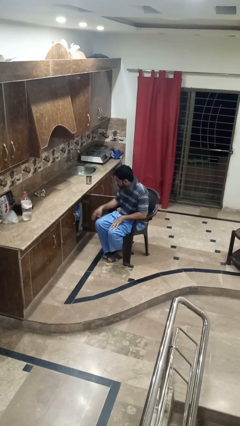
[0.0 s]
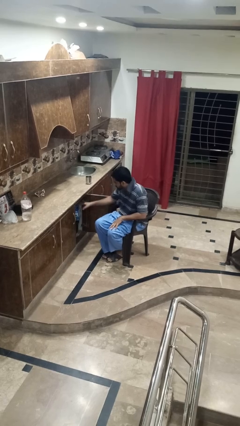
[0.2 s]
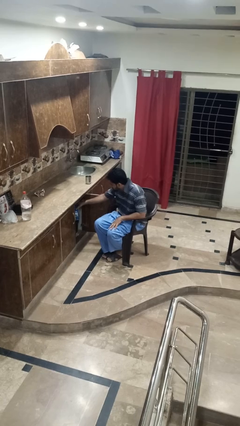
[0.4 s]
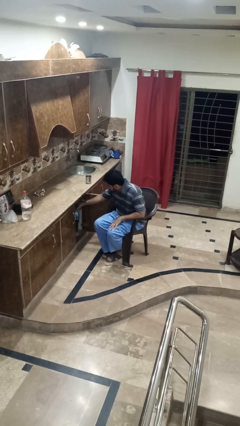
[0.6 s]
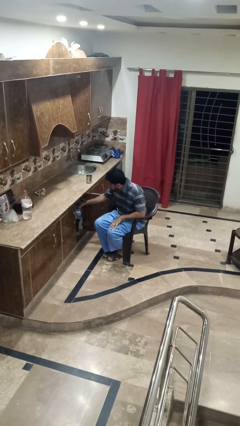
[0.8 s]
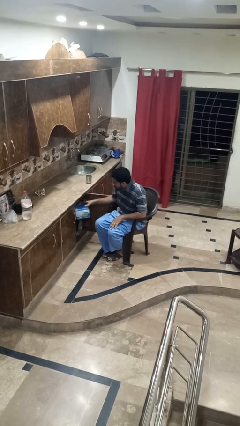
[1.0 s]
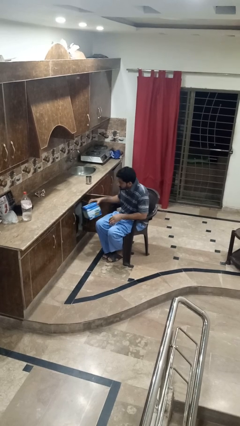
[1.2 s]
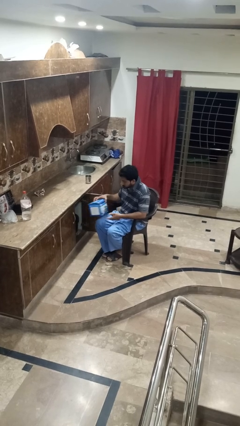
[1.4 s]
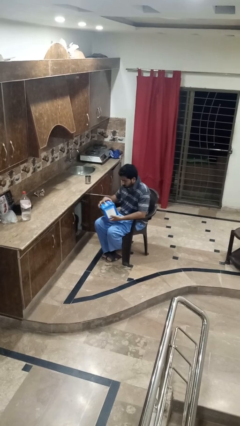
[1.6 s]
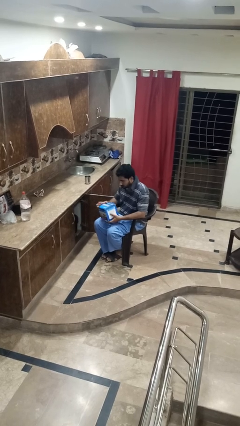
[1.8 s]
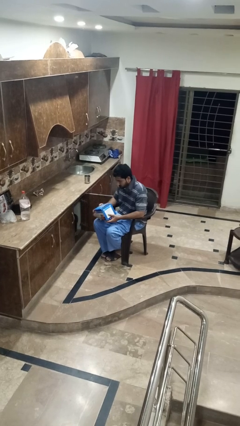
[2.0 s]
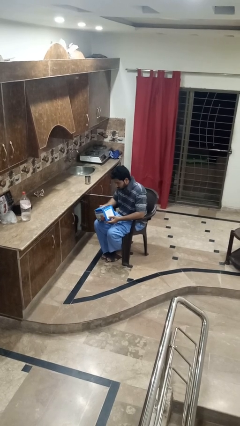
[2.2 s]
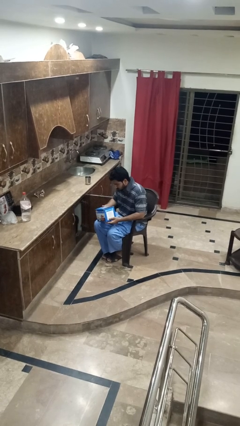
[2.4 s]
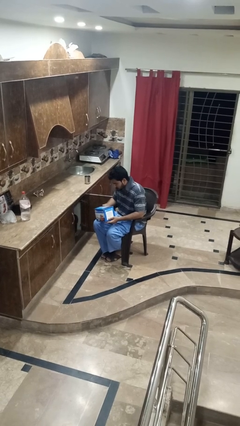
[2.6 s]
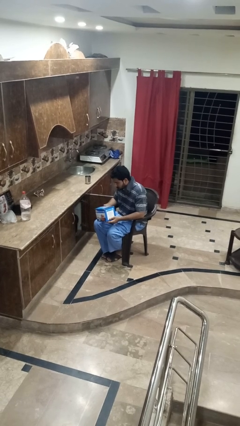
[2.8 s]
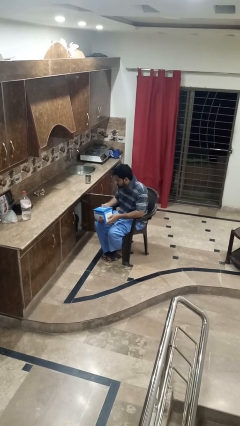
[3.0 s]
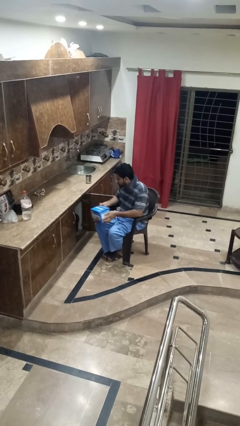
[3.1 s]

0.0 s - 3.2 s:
person picks up object from cabinet

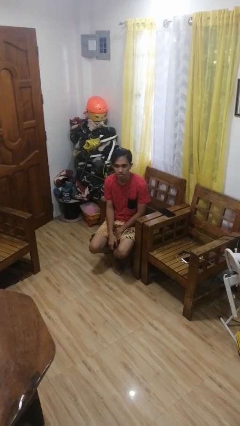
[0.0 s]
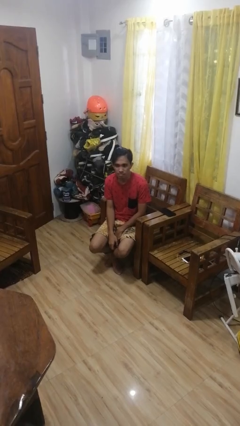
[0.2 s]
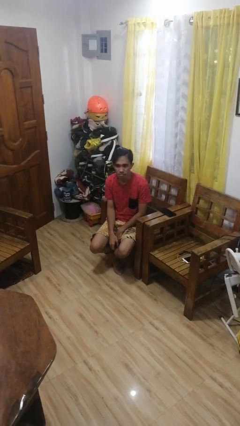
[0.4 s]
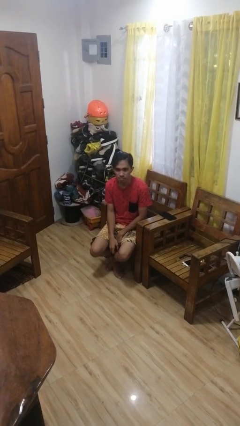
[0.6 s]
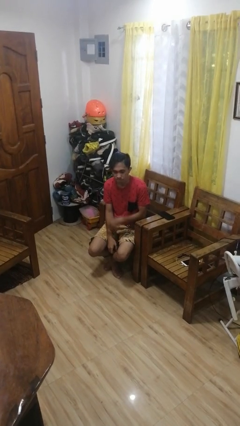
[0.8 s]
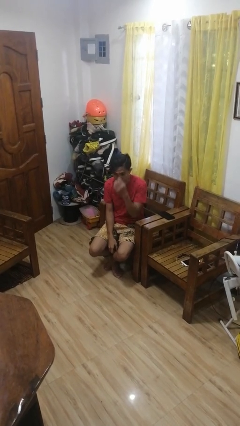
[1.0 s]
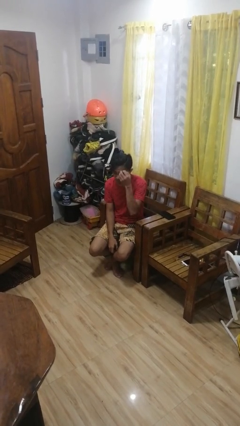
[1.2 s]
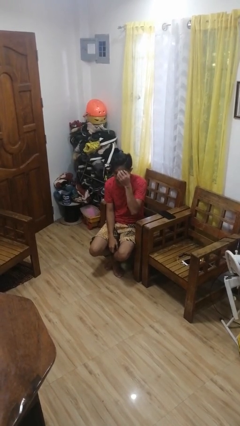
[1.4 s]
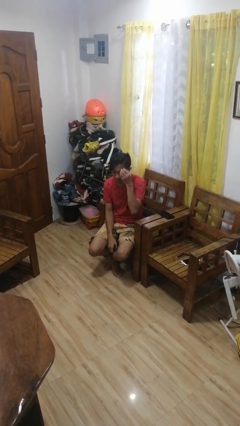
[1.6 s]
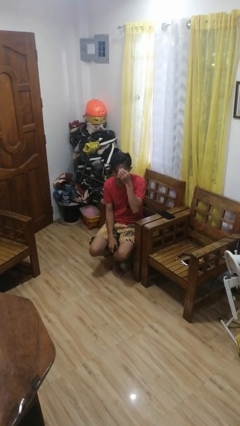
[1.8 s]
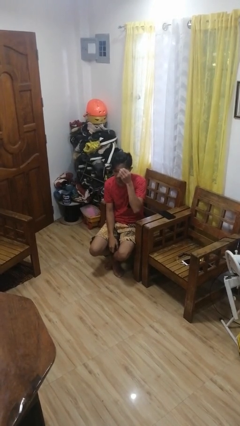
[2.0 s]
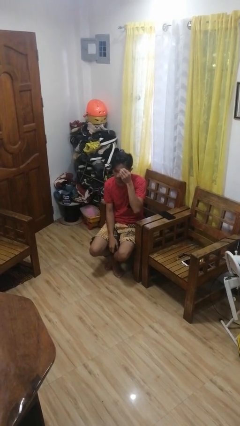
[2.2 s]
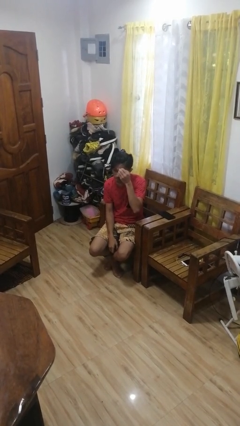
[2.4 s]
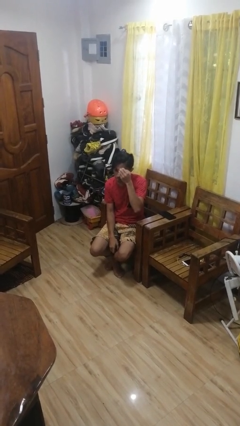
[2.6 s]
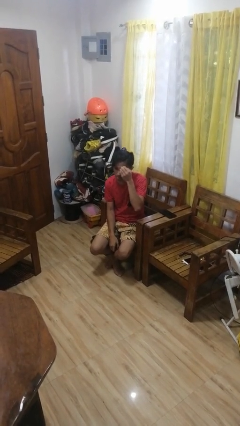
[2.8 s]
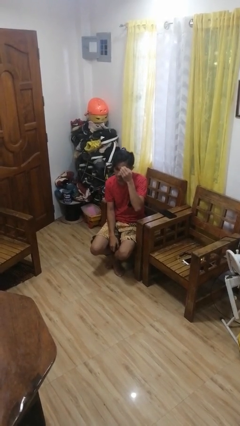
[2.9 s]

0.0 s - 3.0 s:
person scratches face

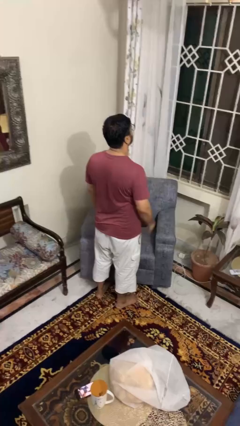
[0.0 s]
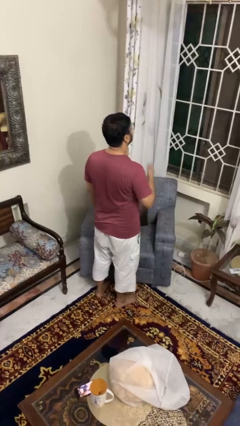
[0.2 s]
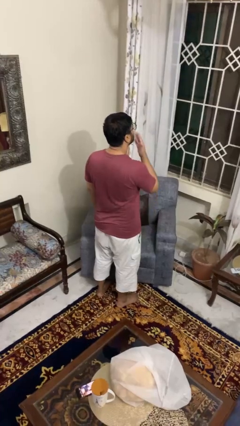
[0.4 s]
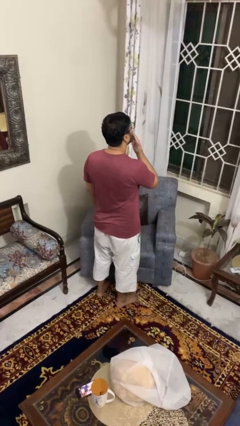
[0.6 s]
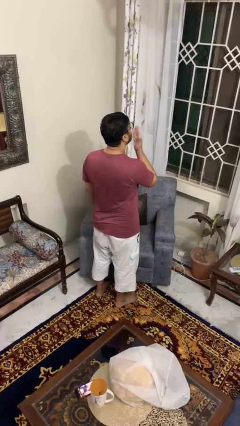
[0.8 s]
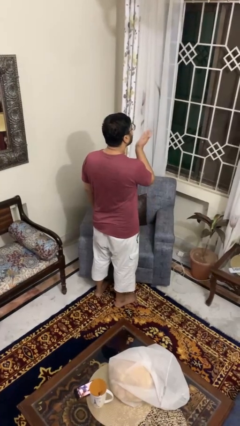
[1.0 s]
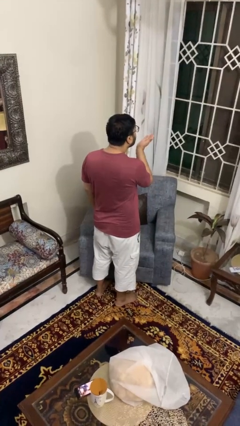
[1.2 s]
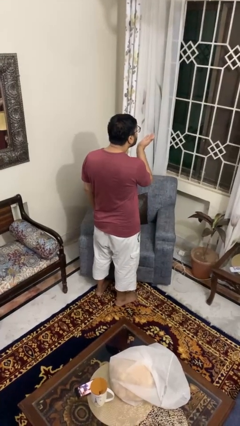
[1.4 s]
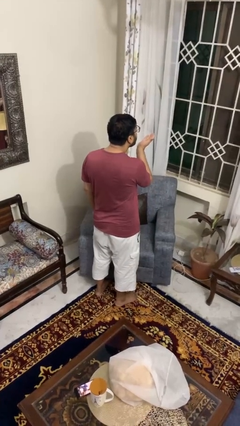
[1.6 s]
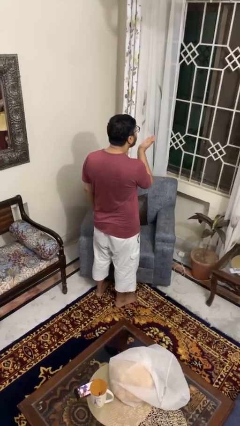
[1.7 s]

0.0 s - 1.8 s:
person gestures blow kiss

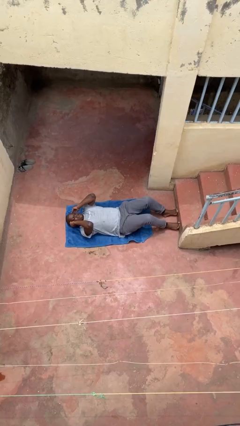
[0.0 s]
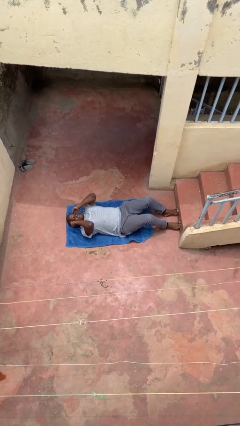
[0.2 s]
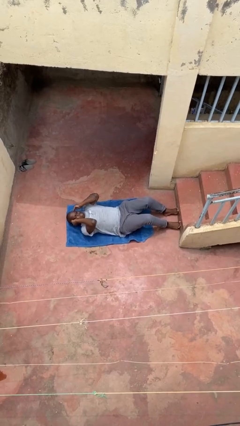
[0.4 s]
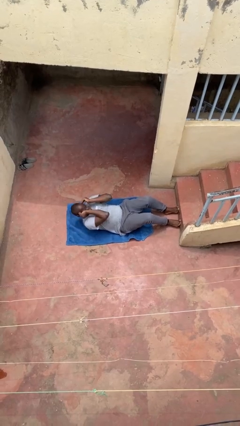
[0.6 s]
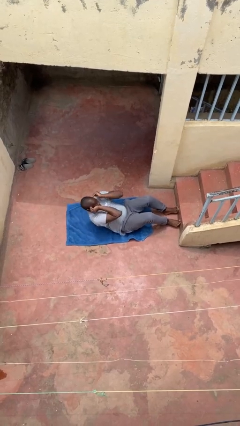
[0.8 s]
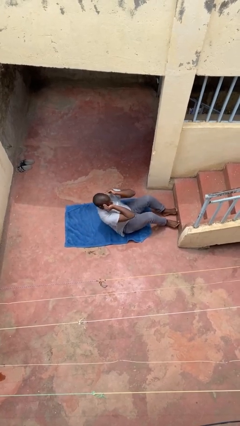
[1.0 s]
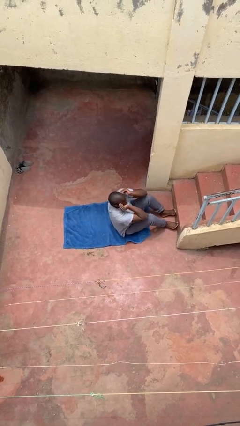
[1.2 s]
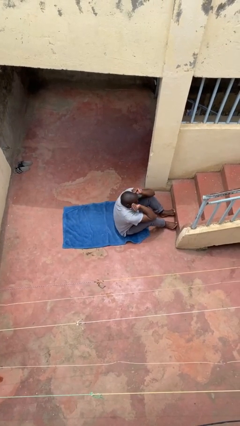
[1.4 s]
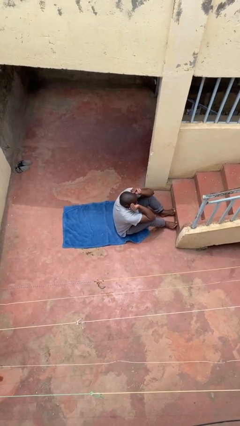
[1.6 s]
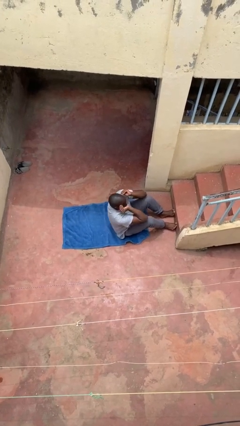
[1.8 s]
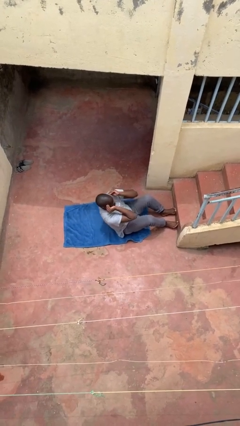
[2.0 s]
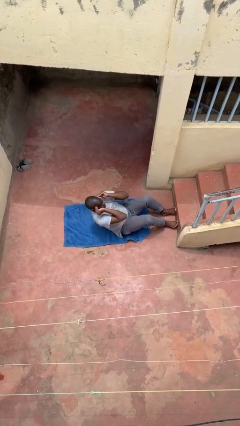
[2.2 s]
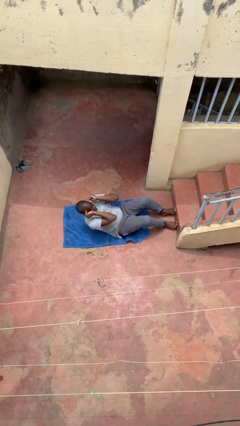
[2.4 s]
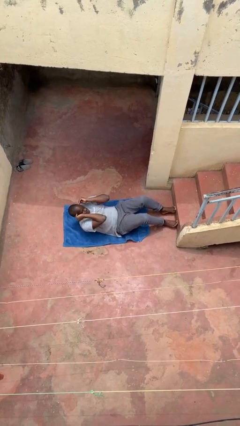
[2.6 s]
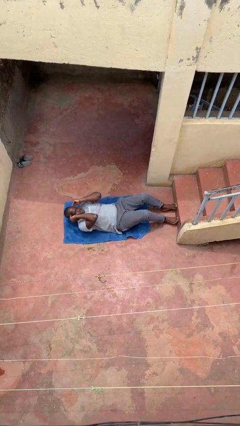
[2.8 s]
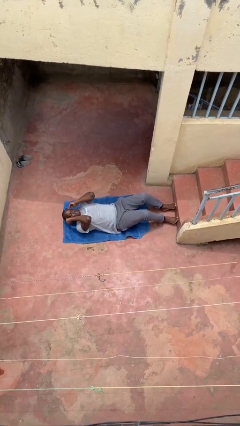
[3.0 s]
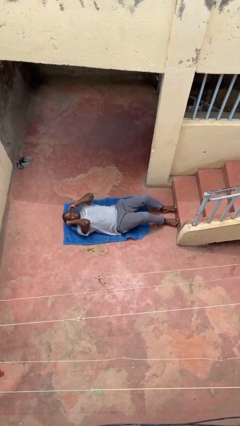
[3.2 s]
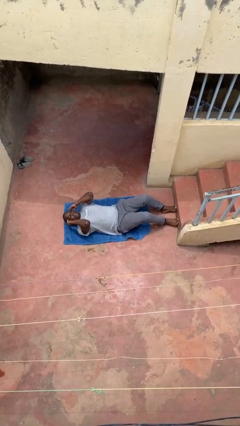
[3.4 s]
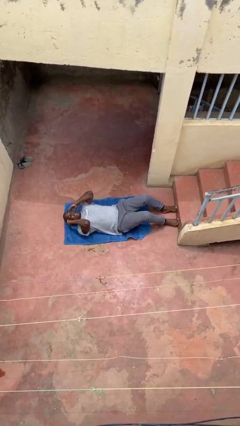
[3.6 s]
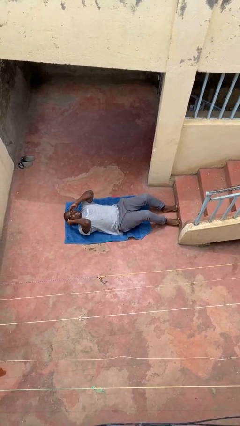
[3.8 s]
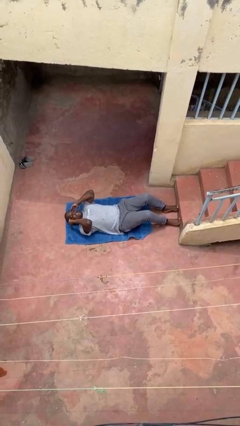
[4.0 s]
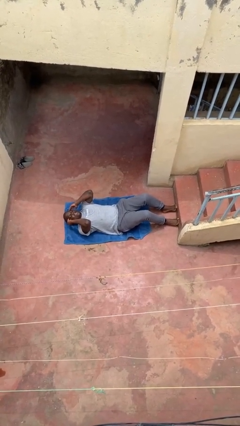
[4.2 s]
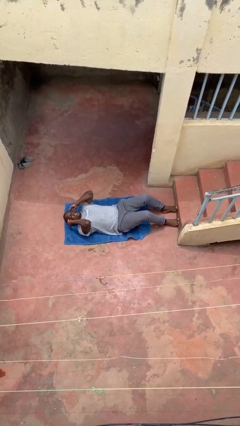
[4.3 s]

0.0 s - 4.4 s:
person exercises with situp

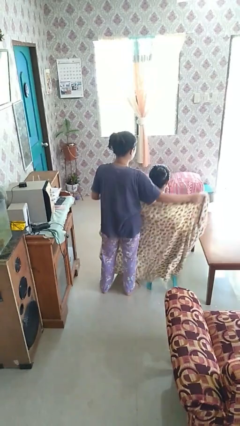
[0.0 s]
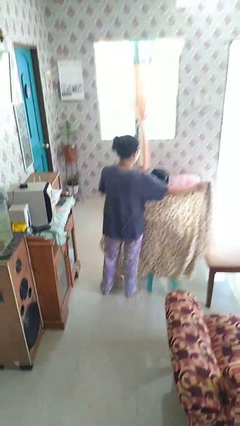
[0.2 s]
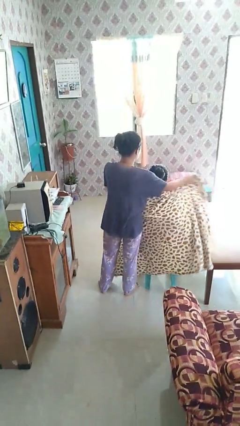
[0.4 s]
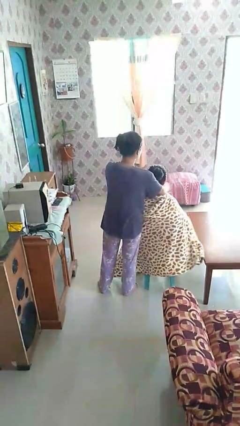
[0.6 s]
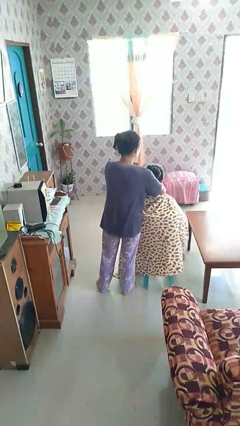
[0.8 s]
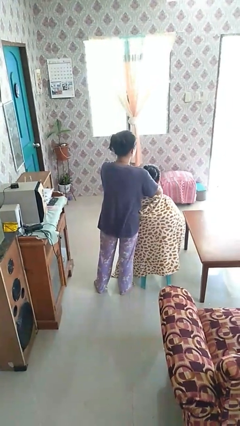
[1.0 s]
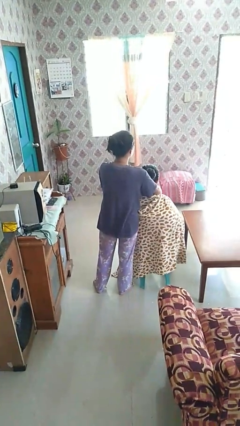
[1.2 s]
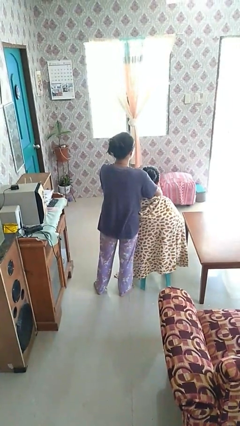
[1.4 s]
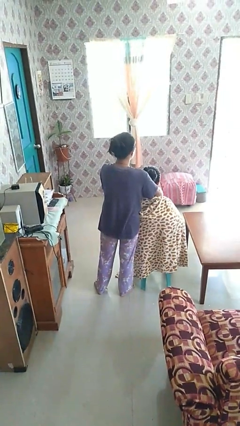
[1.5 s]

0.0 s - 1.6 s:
person covers friend with blanket

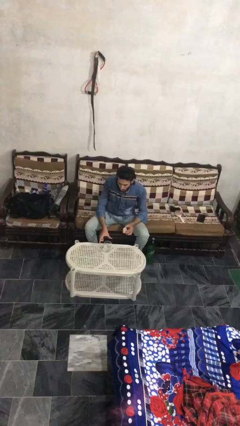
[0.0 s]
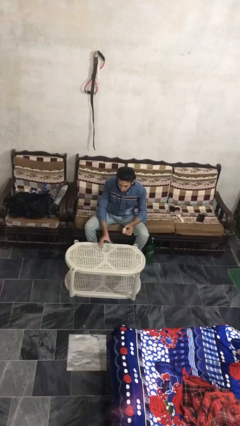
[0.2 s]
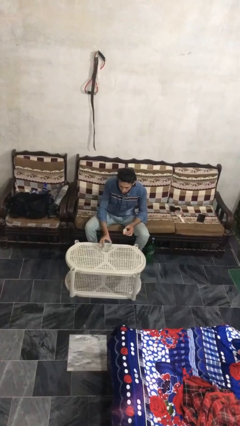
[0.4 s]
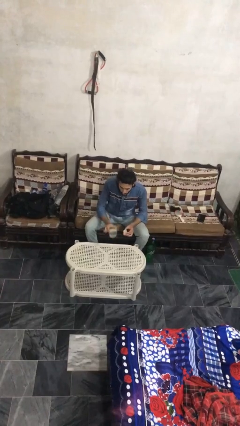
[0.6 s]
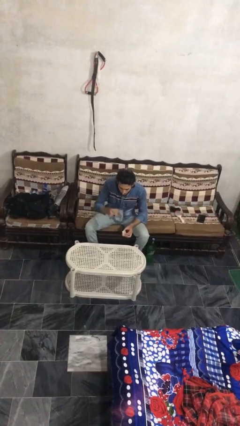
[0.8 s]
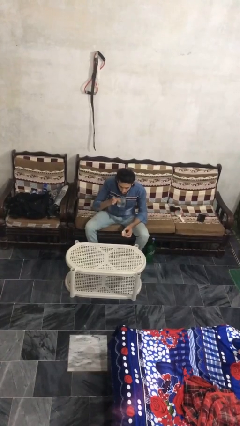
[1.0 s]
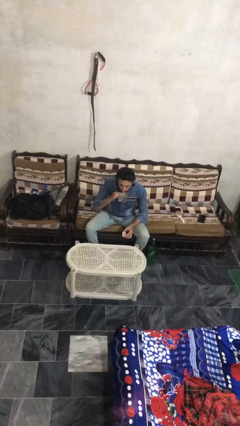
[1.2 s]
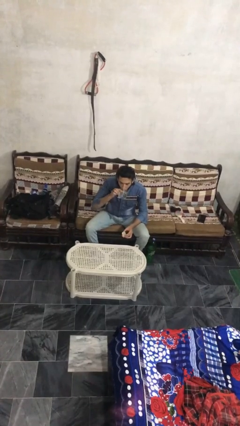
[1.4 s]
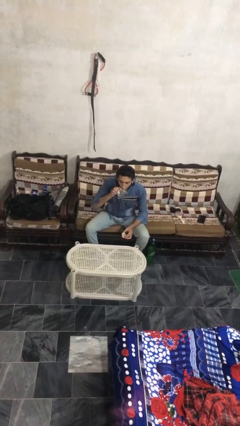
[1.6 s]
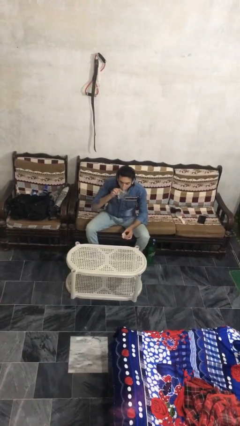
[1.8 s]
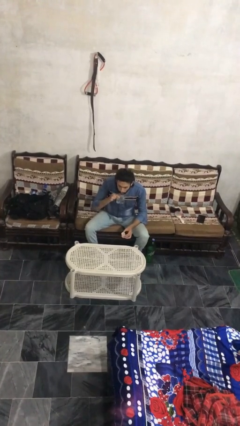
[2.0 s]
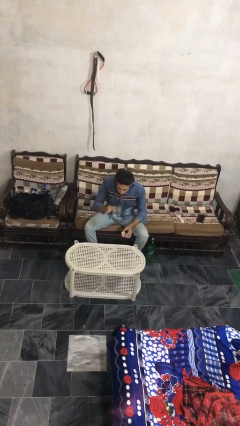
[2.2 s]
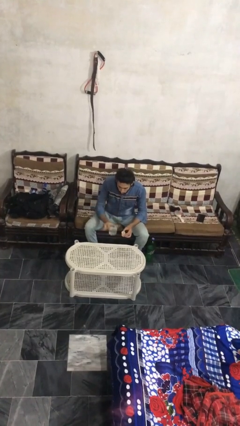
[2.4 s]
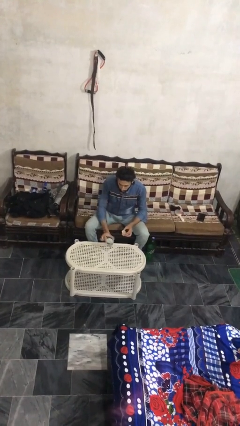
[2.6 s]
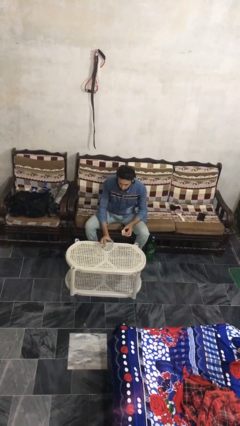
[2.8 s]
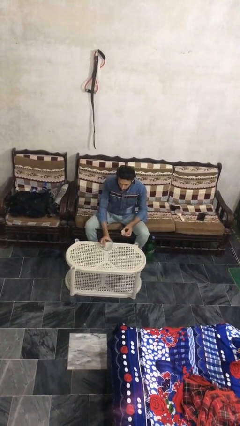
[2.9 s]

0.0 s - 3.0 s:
person drinks from cup

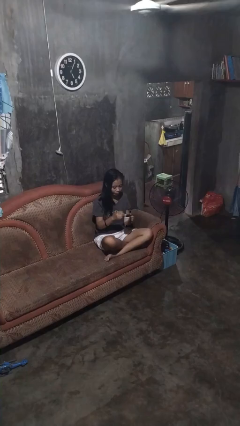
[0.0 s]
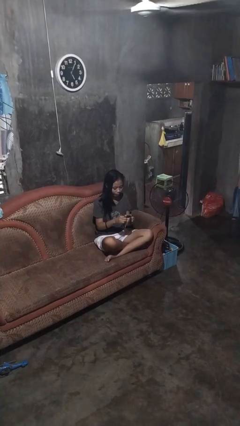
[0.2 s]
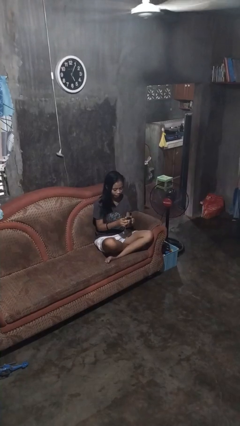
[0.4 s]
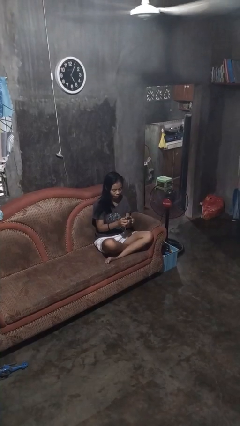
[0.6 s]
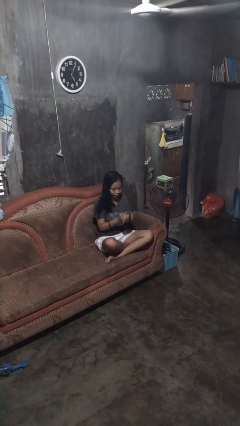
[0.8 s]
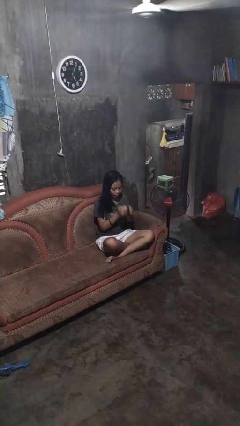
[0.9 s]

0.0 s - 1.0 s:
person drinks from mug
